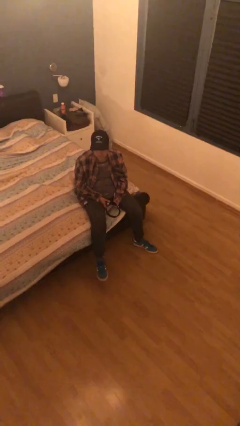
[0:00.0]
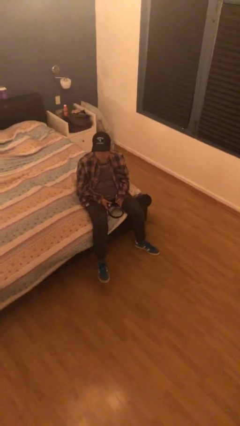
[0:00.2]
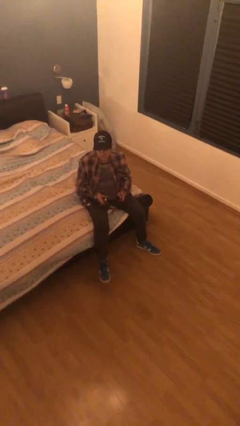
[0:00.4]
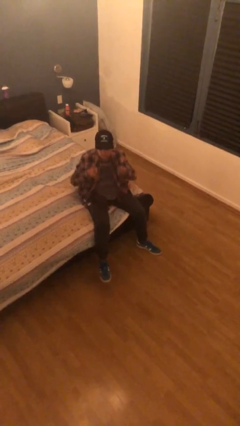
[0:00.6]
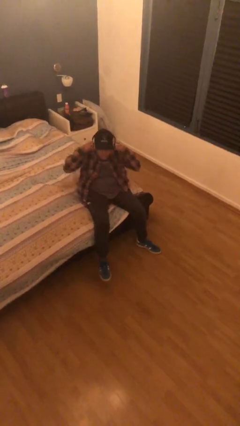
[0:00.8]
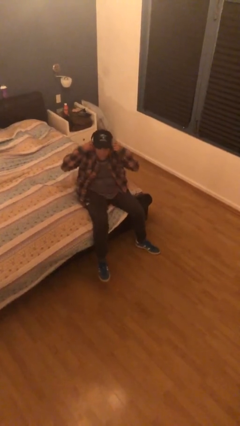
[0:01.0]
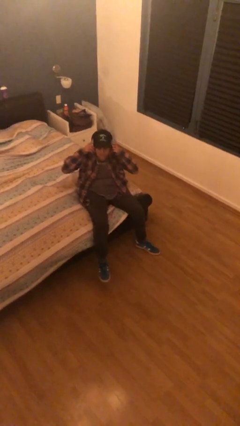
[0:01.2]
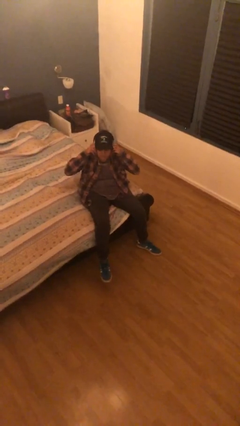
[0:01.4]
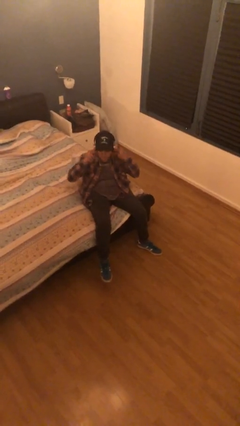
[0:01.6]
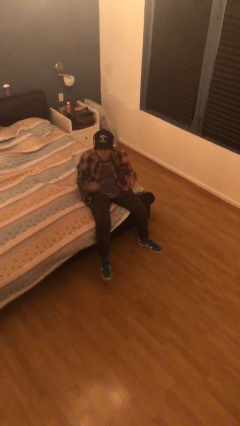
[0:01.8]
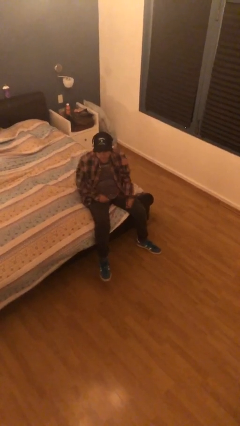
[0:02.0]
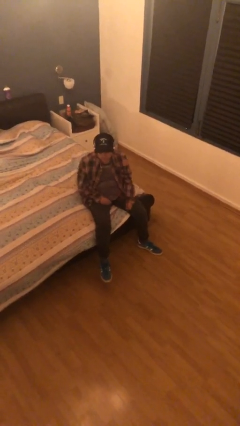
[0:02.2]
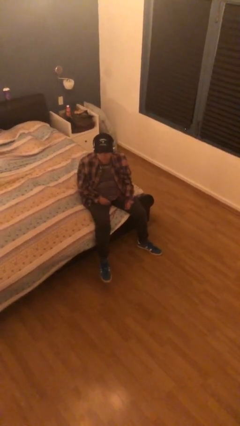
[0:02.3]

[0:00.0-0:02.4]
person puts on headphones

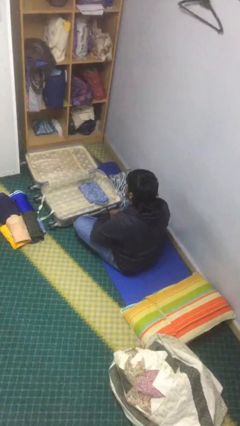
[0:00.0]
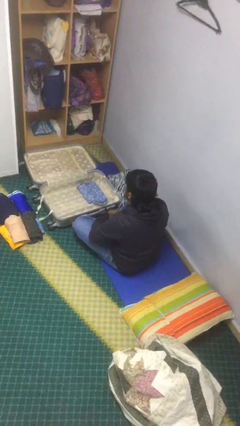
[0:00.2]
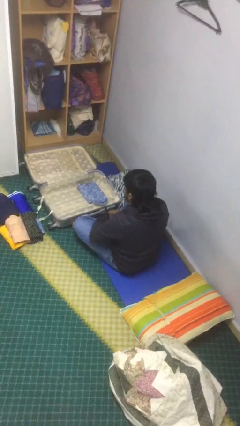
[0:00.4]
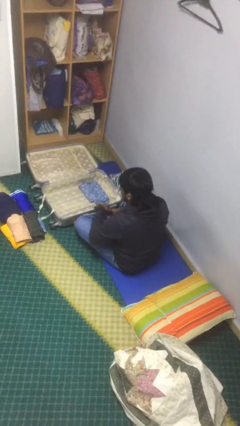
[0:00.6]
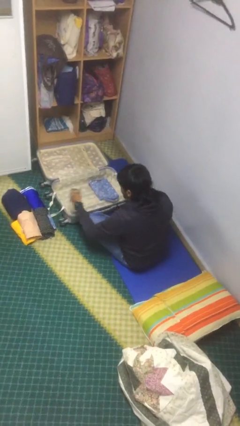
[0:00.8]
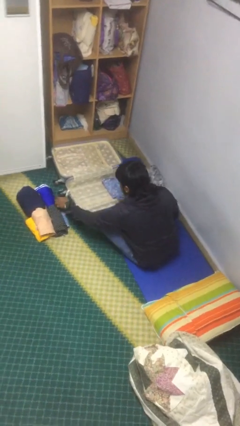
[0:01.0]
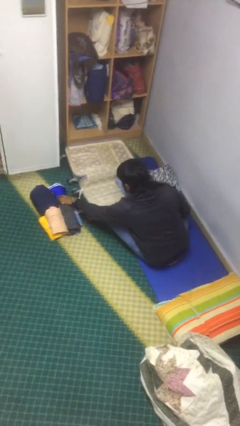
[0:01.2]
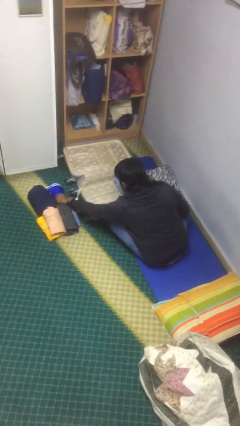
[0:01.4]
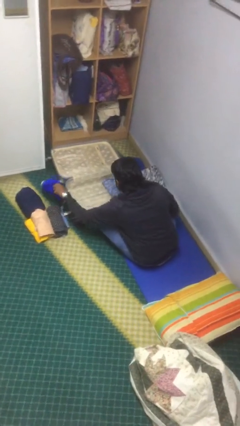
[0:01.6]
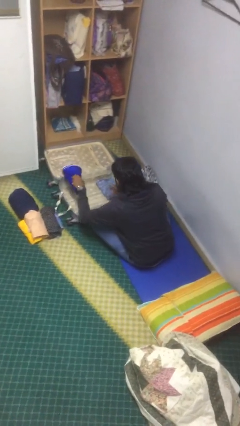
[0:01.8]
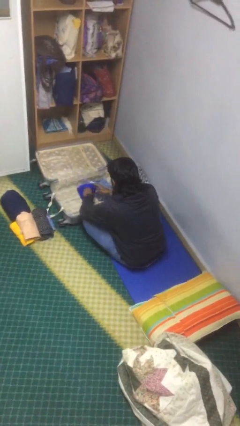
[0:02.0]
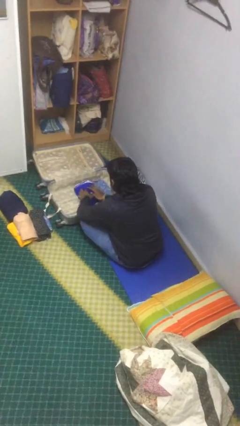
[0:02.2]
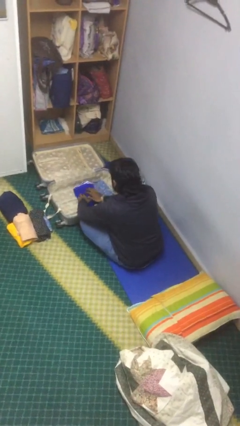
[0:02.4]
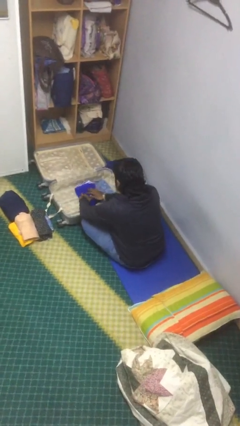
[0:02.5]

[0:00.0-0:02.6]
person loads clothes into suitcase

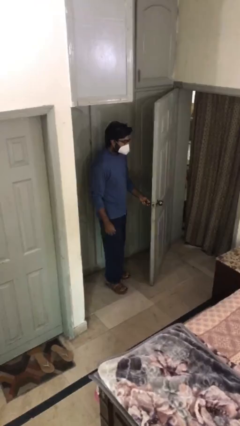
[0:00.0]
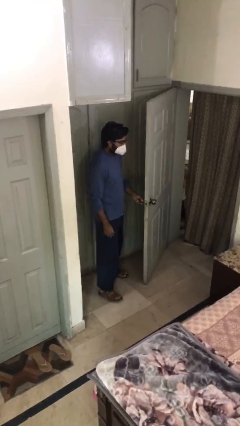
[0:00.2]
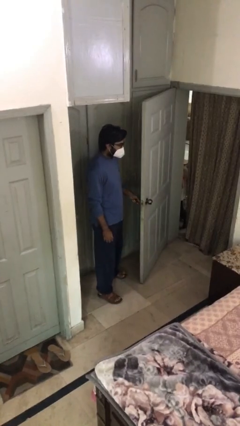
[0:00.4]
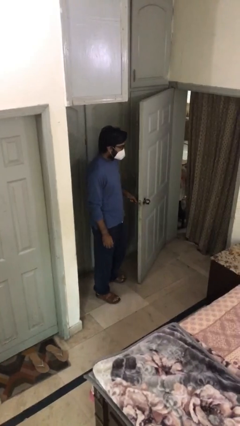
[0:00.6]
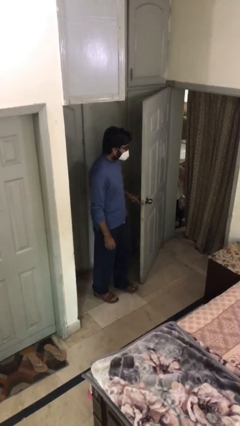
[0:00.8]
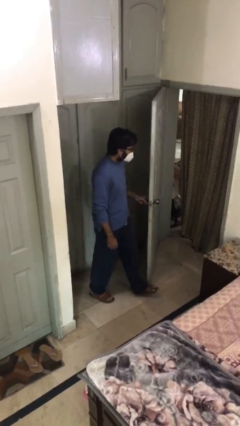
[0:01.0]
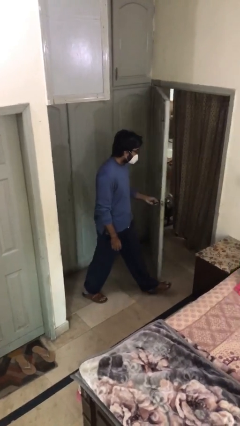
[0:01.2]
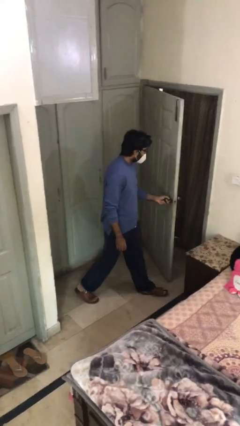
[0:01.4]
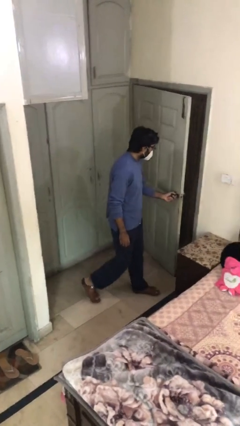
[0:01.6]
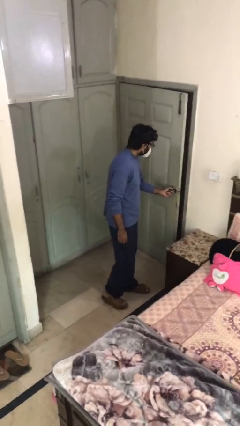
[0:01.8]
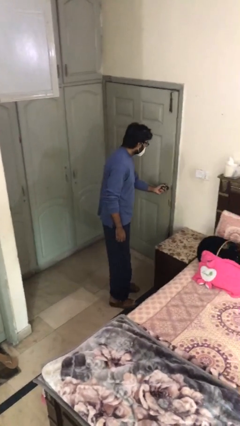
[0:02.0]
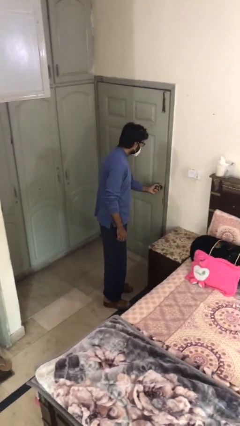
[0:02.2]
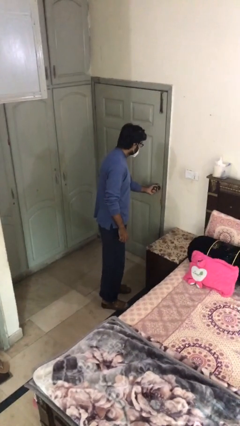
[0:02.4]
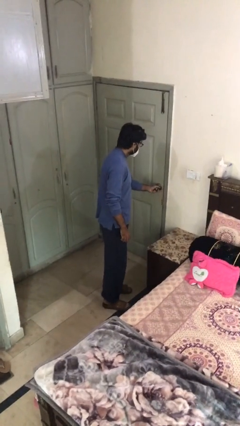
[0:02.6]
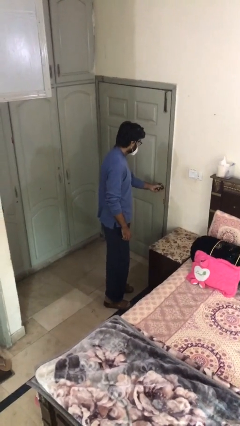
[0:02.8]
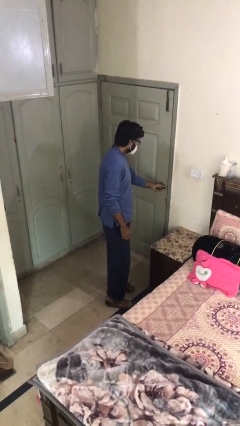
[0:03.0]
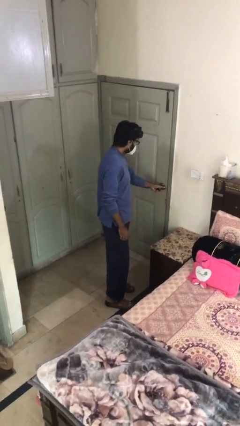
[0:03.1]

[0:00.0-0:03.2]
person closes facility door

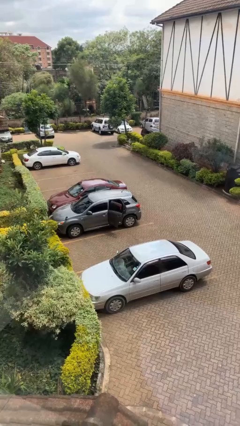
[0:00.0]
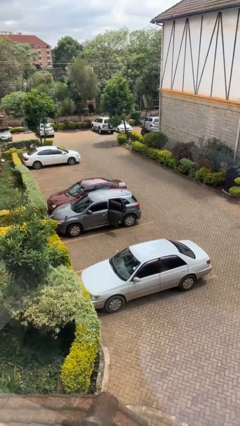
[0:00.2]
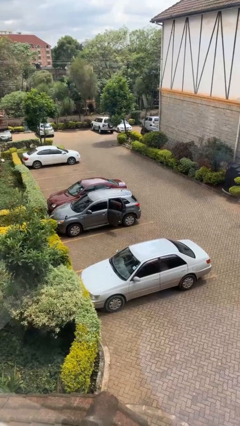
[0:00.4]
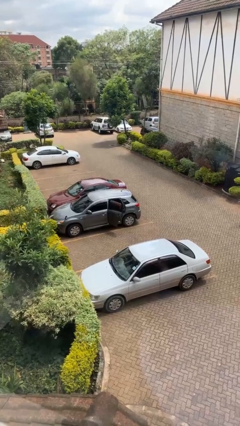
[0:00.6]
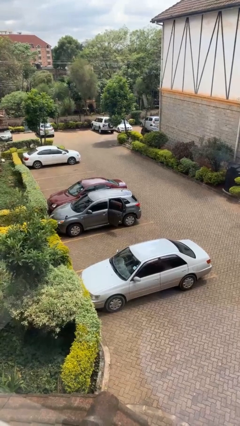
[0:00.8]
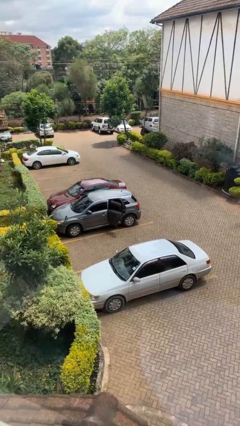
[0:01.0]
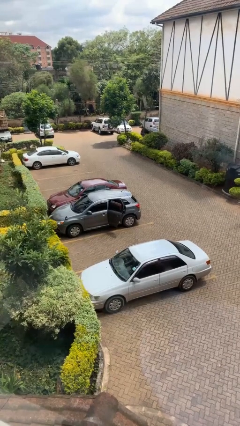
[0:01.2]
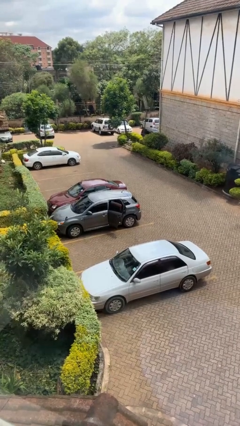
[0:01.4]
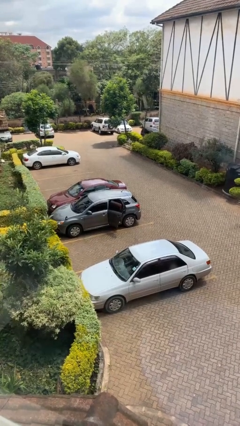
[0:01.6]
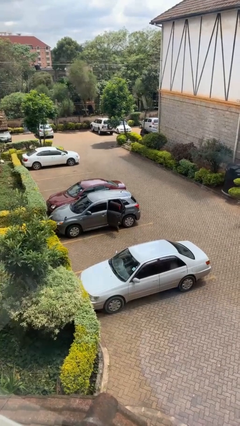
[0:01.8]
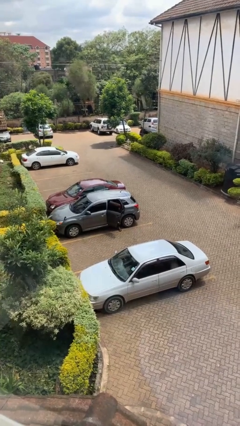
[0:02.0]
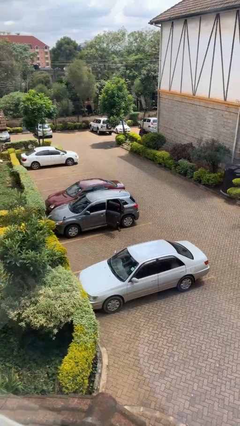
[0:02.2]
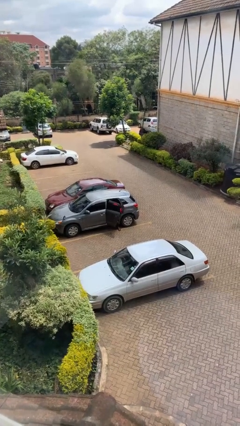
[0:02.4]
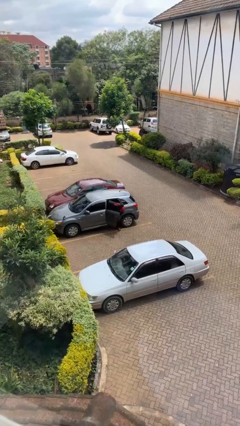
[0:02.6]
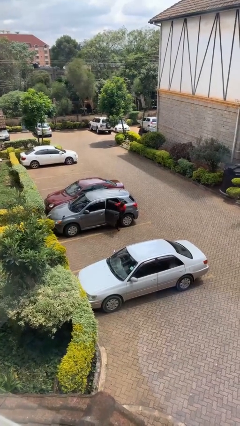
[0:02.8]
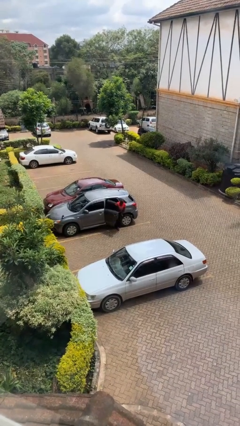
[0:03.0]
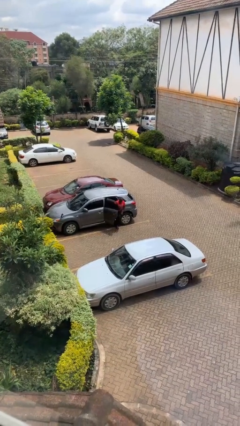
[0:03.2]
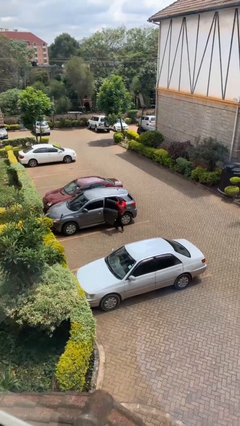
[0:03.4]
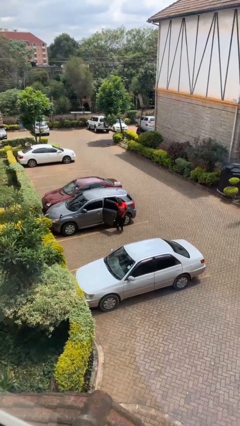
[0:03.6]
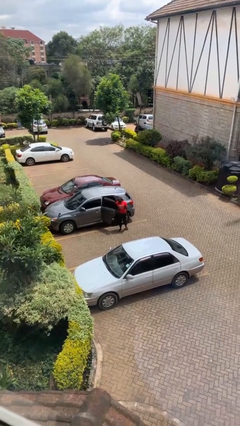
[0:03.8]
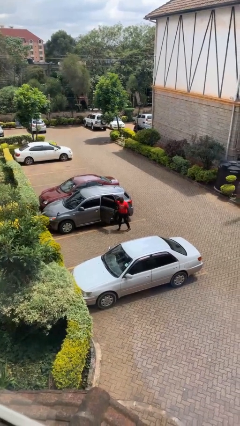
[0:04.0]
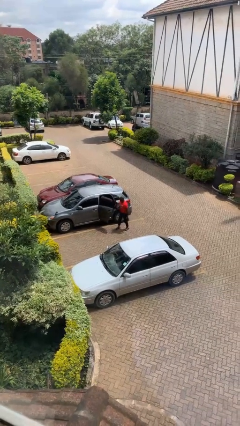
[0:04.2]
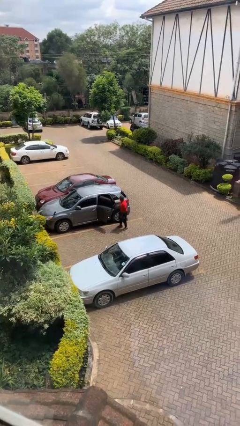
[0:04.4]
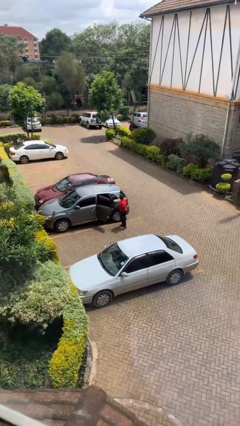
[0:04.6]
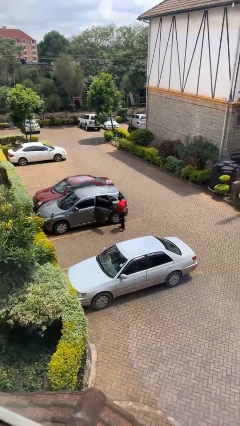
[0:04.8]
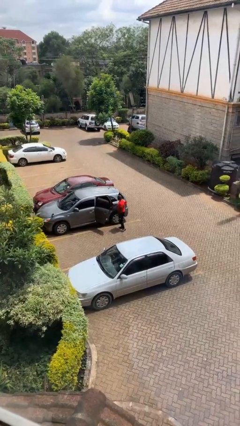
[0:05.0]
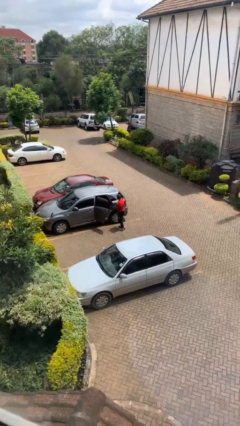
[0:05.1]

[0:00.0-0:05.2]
person exits car

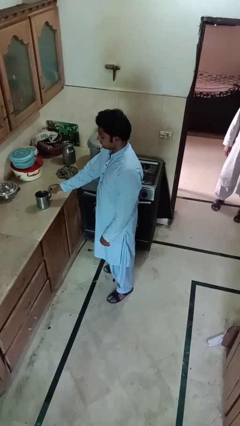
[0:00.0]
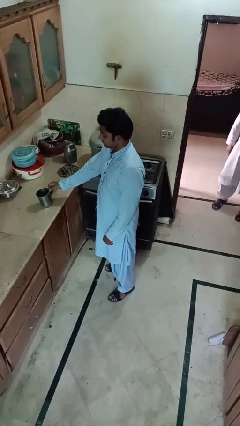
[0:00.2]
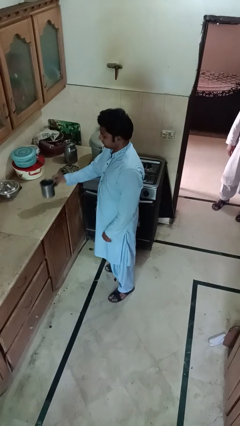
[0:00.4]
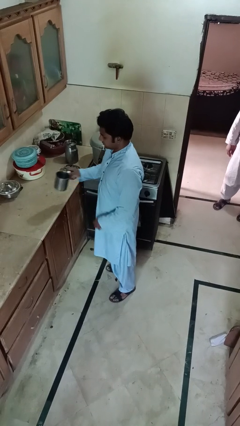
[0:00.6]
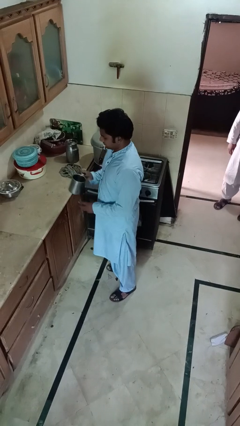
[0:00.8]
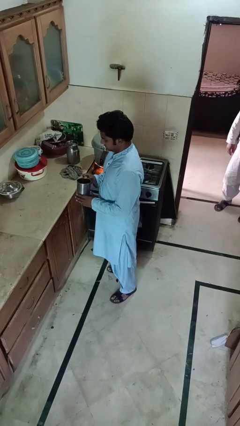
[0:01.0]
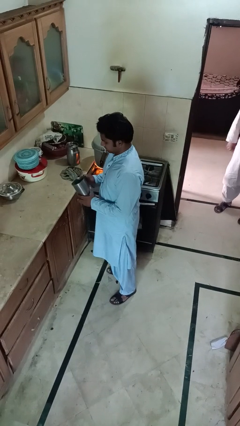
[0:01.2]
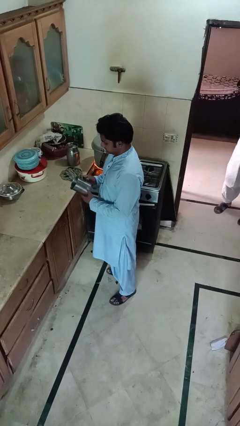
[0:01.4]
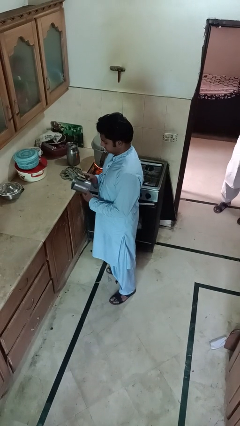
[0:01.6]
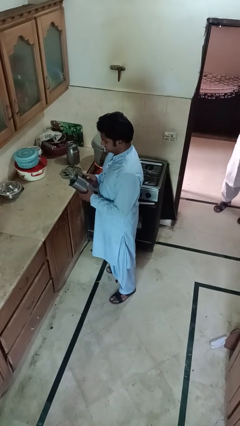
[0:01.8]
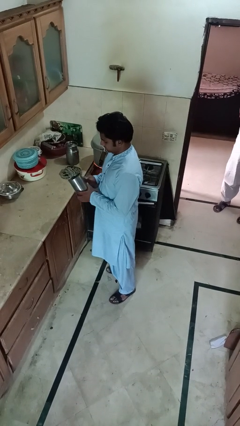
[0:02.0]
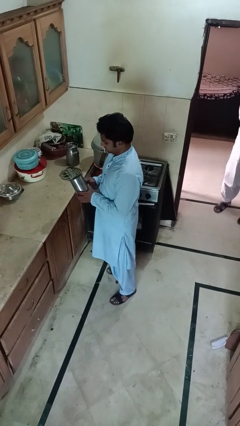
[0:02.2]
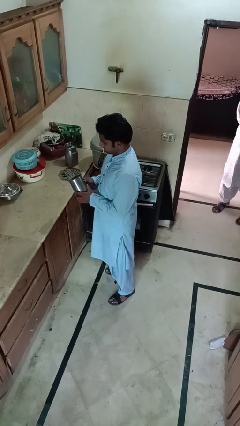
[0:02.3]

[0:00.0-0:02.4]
person picks up object from countertop

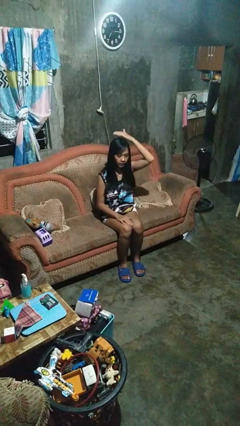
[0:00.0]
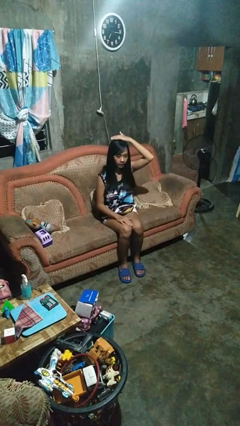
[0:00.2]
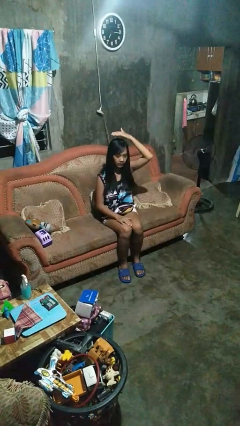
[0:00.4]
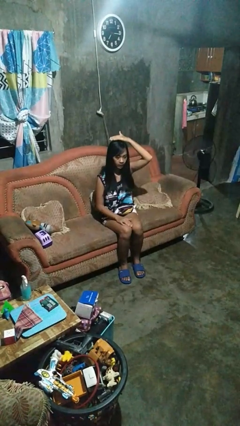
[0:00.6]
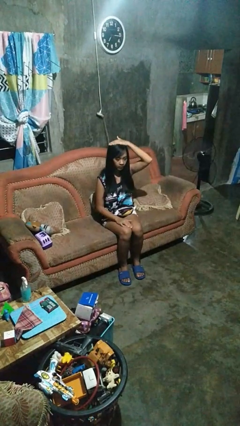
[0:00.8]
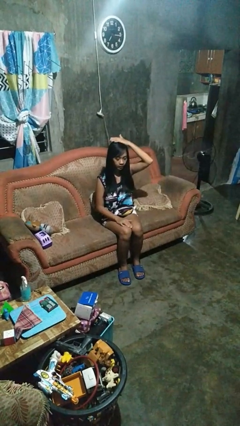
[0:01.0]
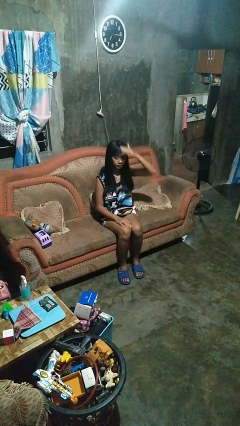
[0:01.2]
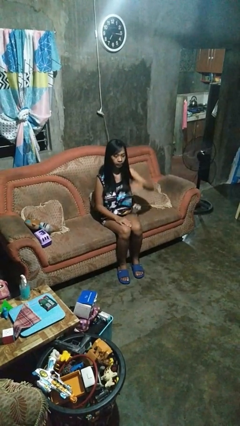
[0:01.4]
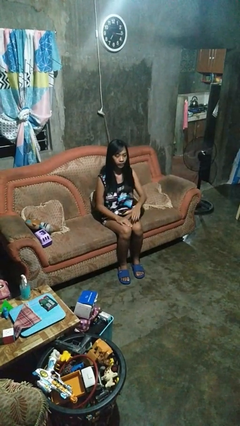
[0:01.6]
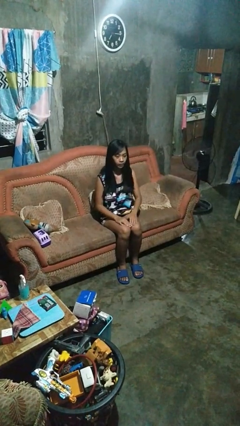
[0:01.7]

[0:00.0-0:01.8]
person pats head
